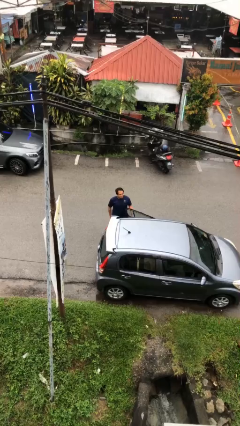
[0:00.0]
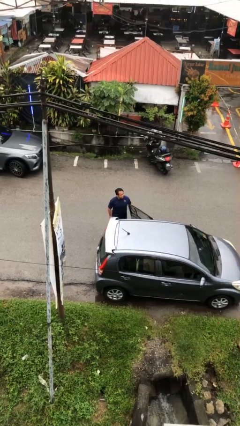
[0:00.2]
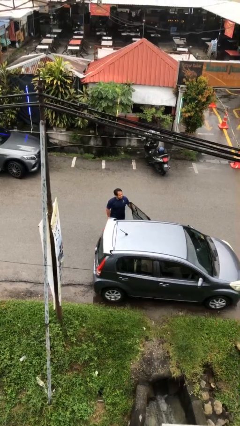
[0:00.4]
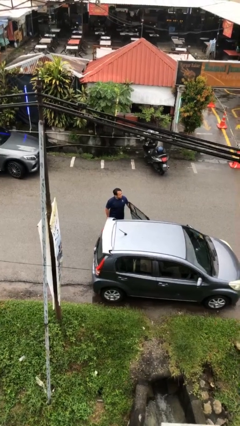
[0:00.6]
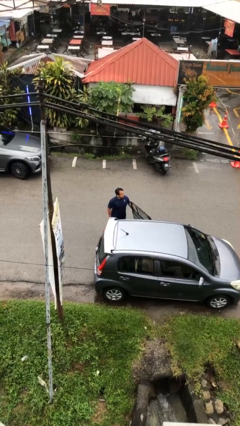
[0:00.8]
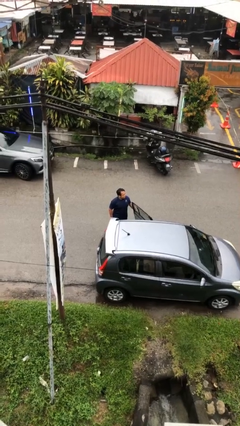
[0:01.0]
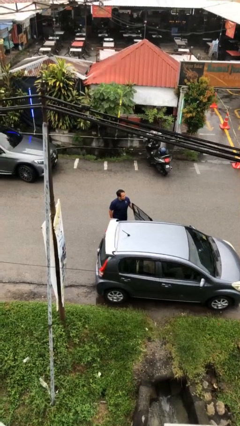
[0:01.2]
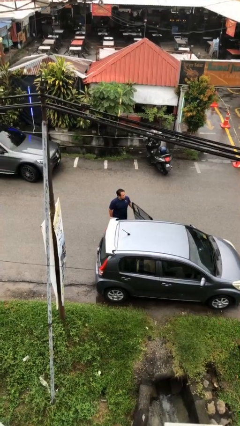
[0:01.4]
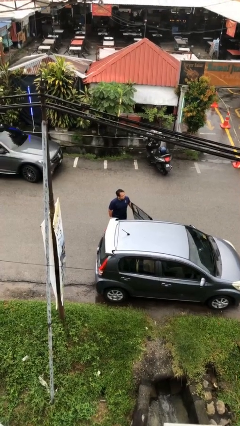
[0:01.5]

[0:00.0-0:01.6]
person opens car door

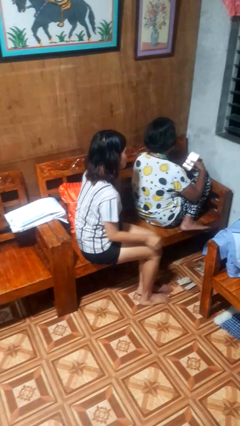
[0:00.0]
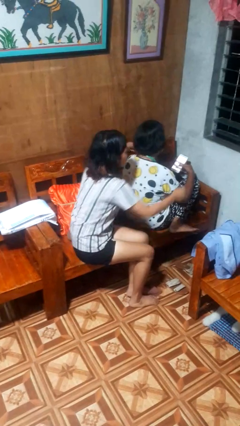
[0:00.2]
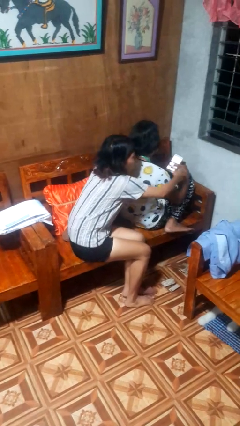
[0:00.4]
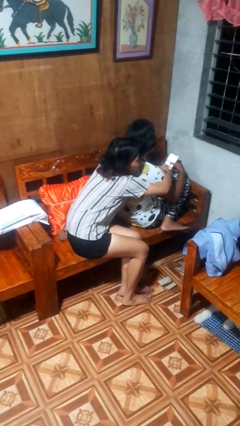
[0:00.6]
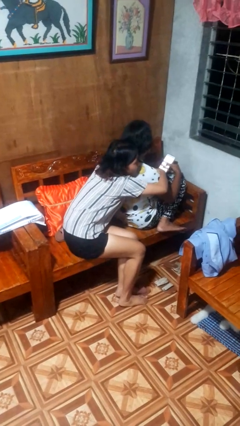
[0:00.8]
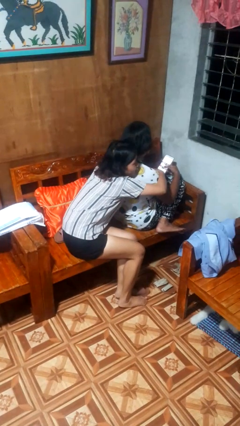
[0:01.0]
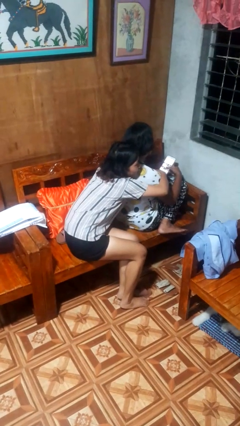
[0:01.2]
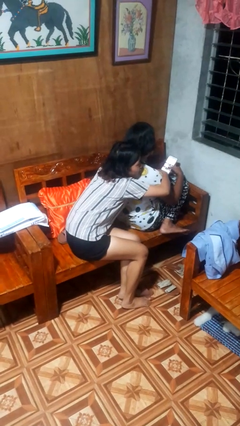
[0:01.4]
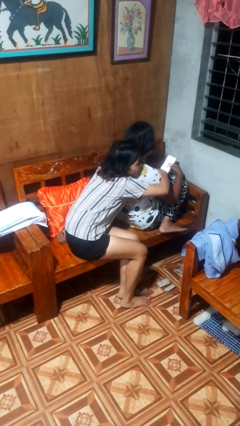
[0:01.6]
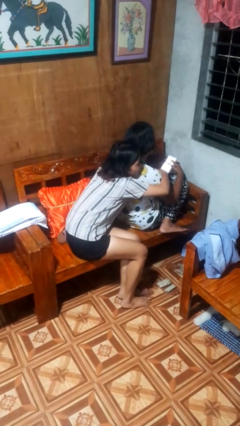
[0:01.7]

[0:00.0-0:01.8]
person hugs person from behind

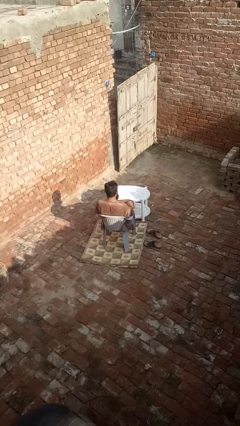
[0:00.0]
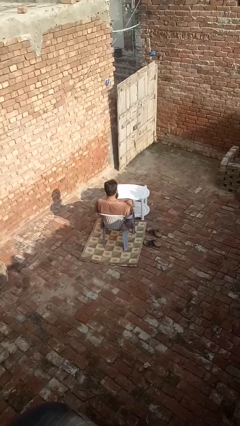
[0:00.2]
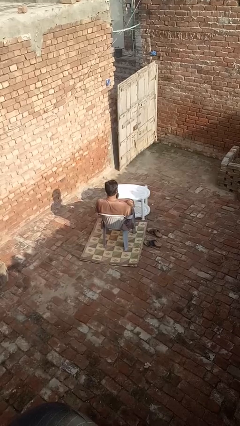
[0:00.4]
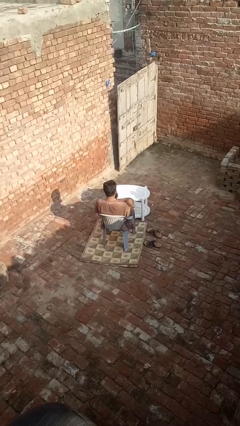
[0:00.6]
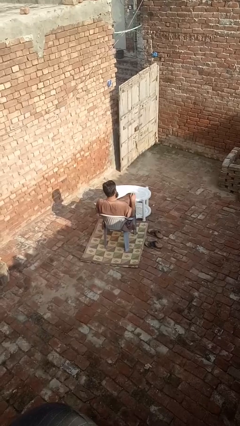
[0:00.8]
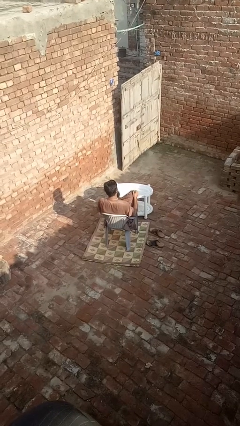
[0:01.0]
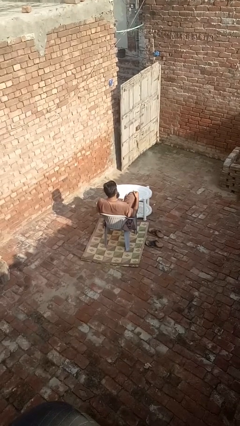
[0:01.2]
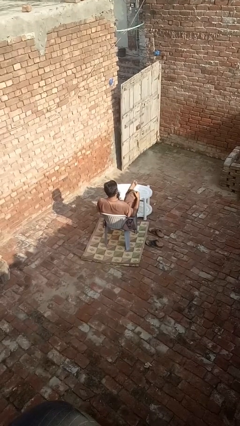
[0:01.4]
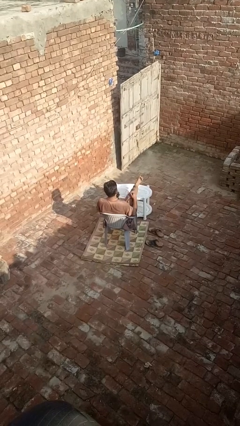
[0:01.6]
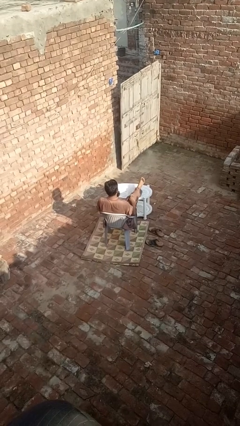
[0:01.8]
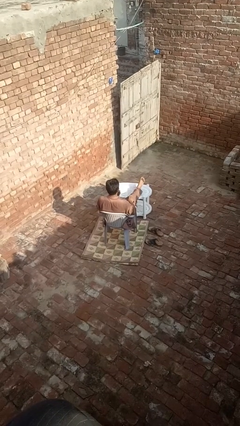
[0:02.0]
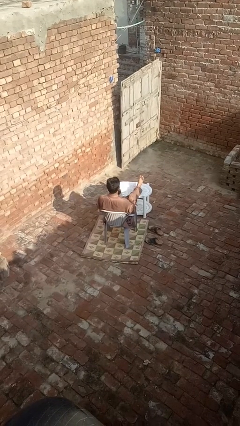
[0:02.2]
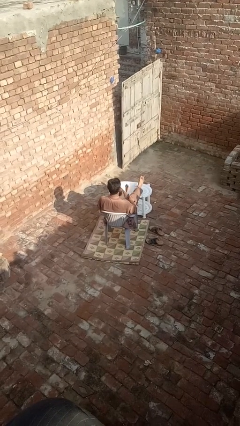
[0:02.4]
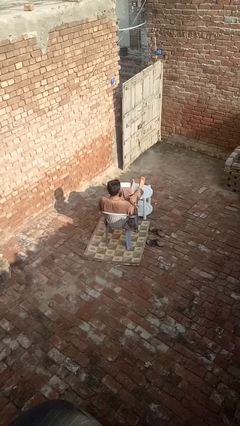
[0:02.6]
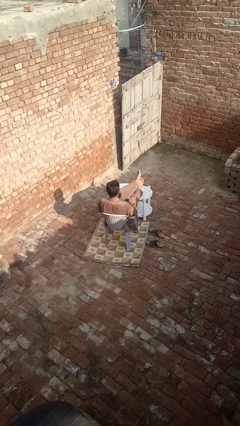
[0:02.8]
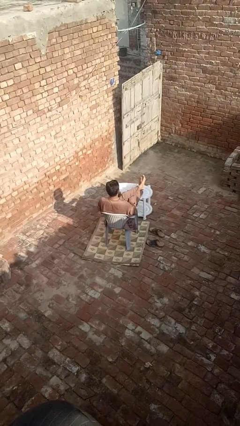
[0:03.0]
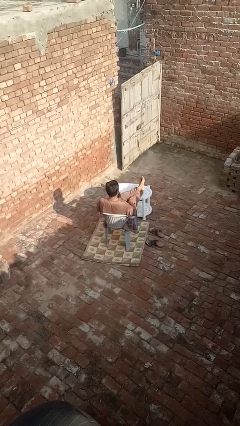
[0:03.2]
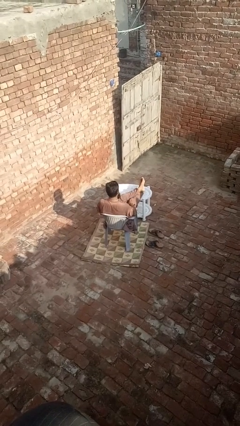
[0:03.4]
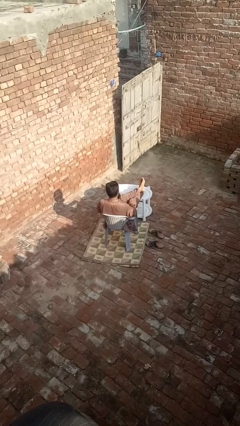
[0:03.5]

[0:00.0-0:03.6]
person puts feet up

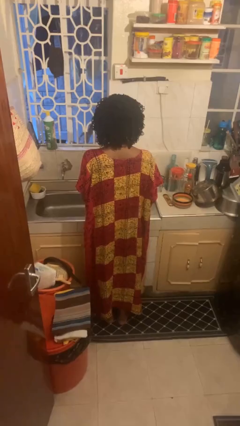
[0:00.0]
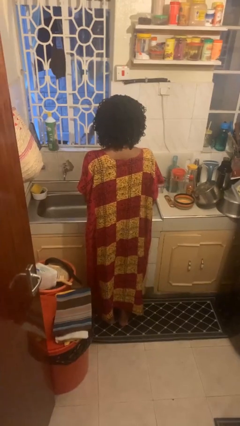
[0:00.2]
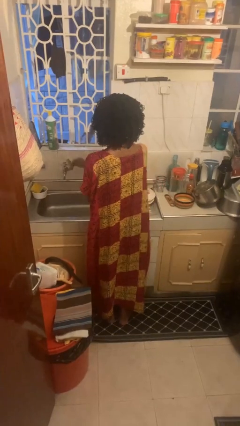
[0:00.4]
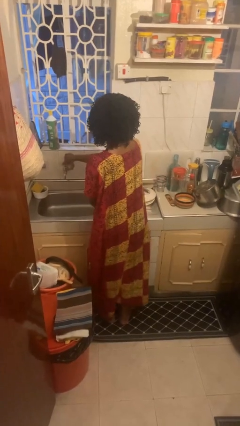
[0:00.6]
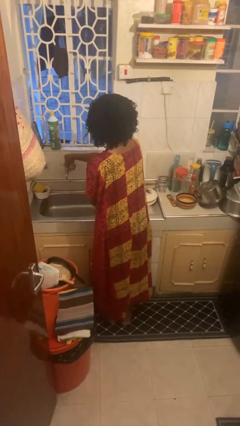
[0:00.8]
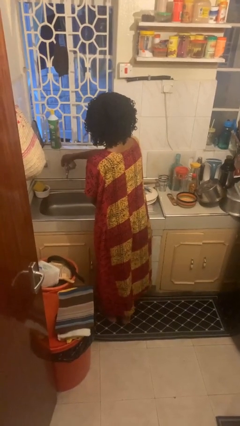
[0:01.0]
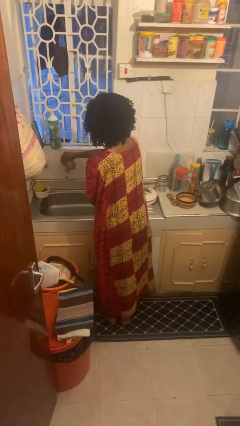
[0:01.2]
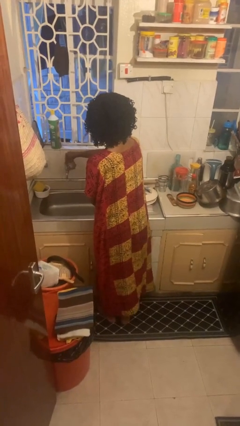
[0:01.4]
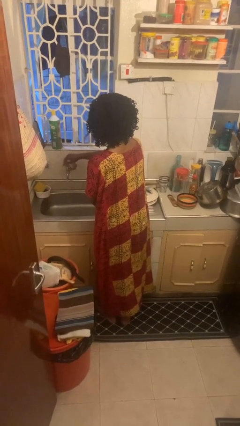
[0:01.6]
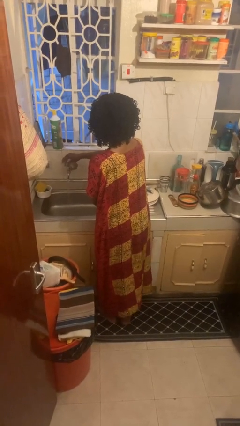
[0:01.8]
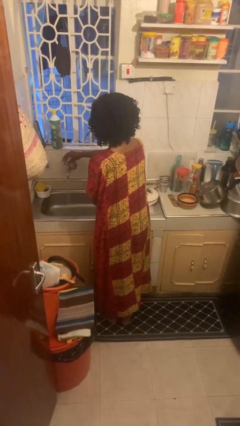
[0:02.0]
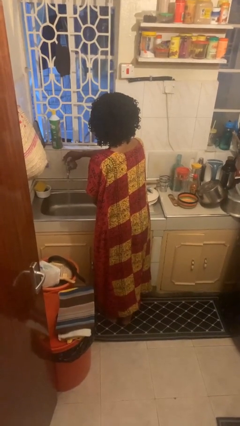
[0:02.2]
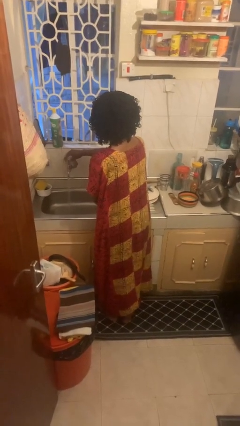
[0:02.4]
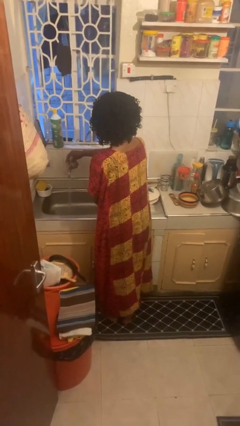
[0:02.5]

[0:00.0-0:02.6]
person turns on faucet

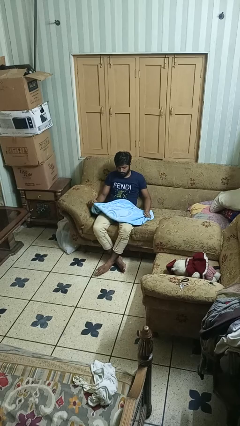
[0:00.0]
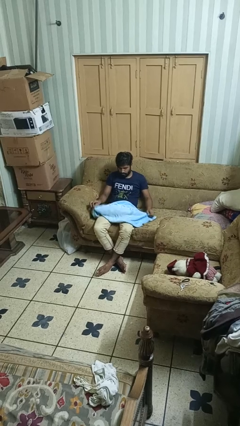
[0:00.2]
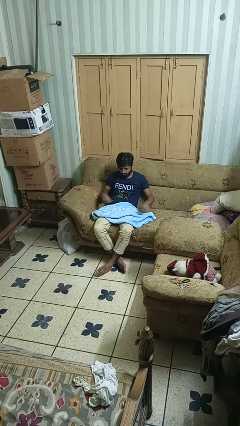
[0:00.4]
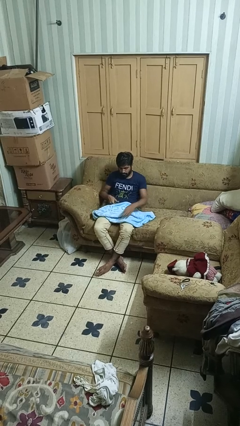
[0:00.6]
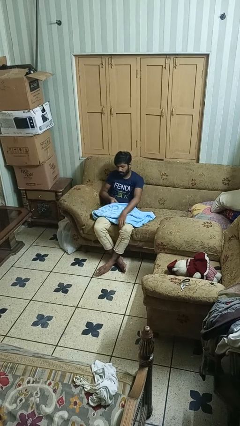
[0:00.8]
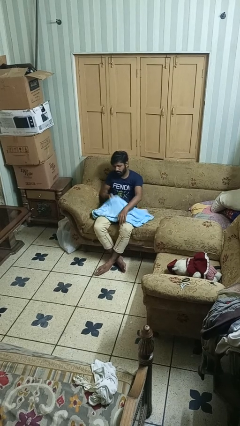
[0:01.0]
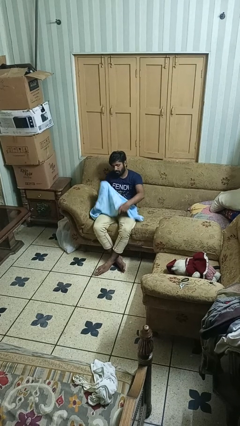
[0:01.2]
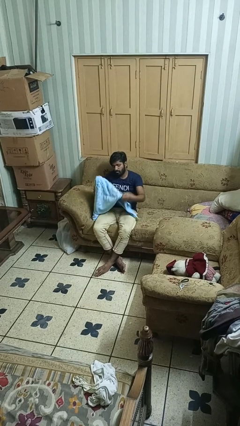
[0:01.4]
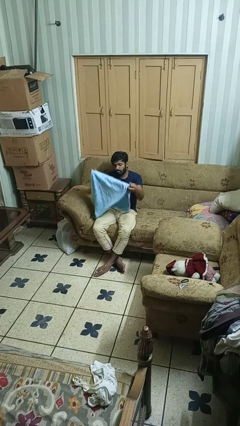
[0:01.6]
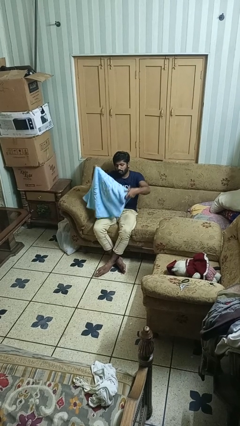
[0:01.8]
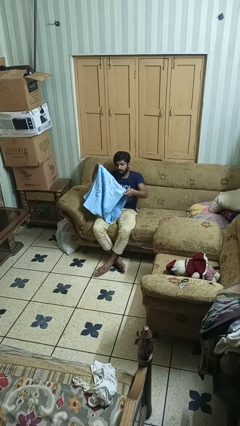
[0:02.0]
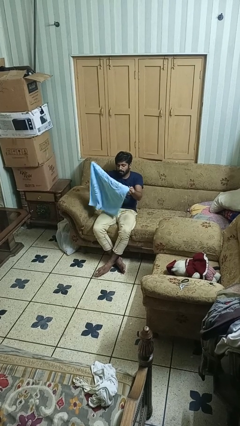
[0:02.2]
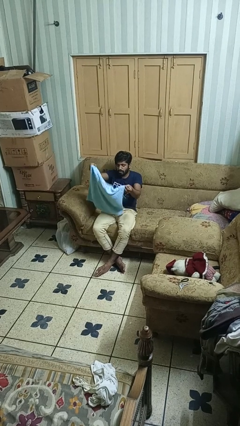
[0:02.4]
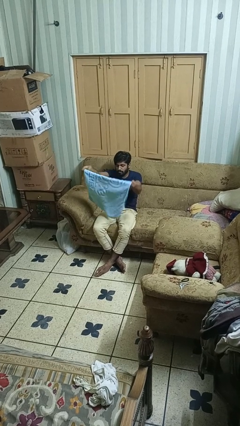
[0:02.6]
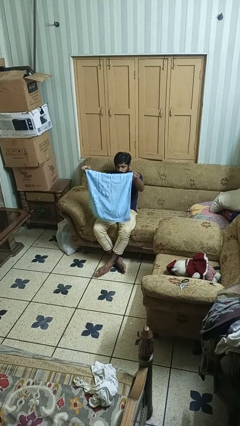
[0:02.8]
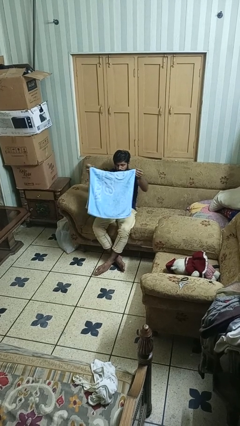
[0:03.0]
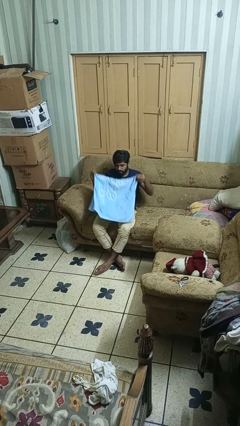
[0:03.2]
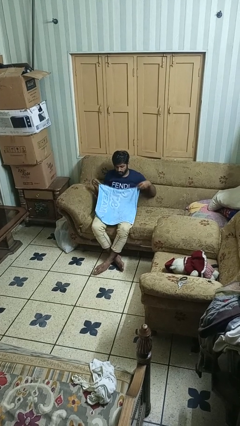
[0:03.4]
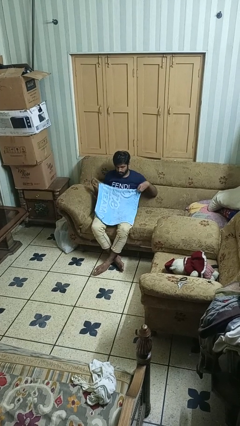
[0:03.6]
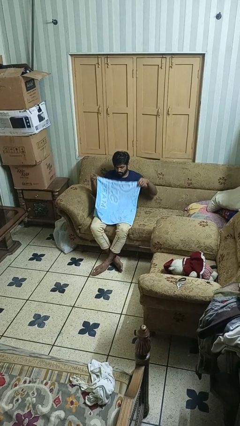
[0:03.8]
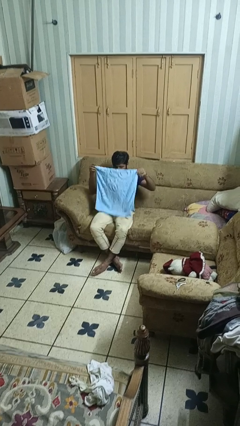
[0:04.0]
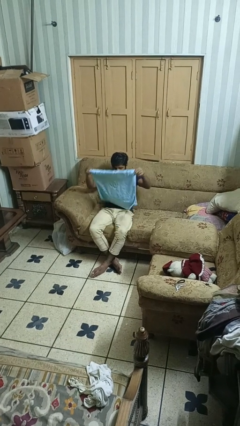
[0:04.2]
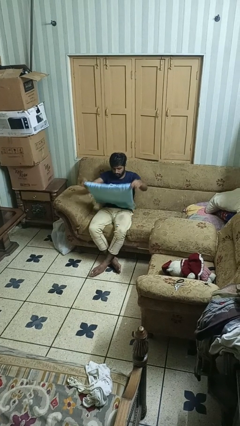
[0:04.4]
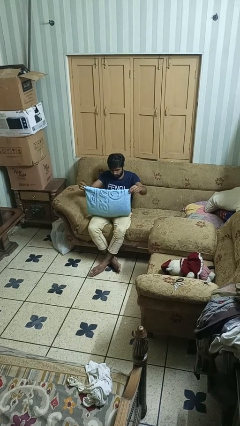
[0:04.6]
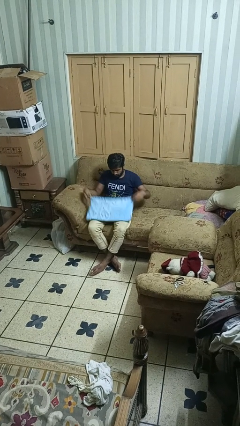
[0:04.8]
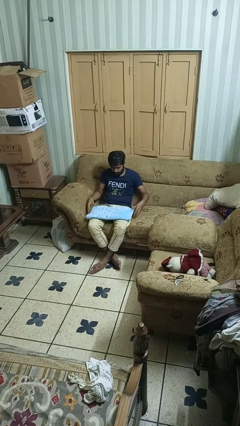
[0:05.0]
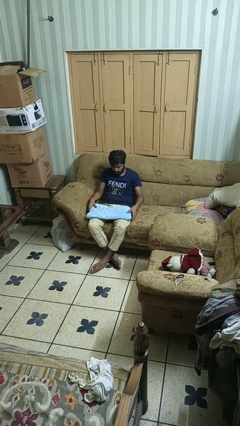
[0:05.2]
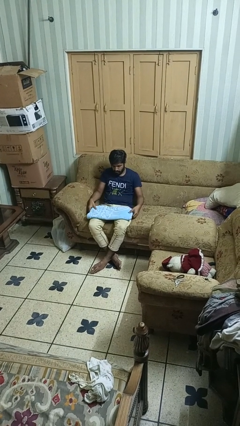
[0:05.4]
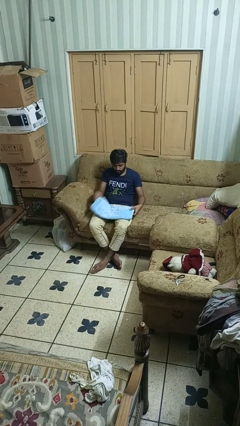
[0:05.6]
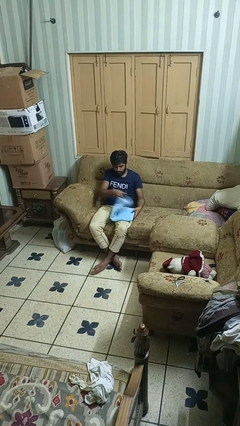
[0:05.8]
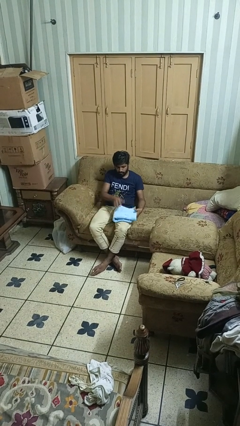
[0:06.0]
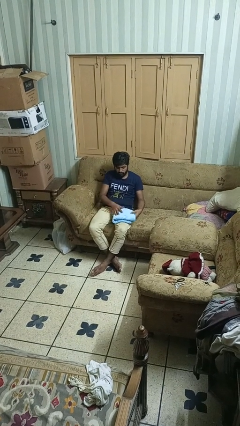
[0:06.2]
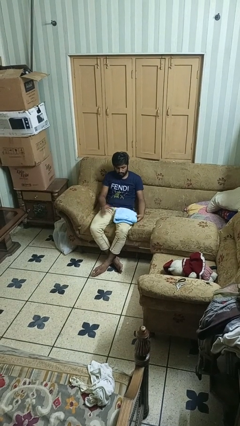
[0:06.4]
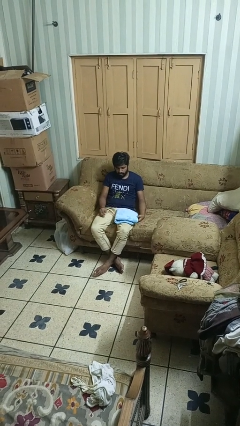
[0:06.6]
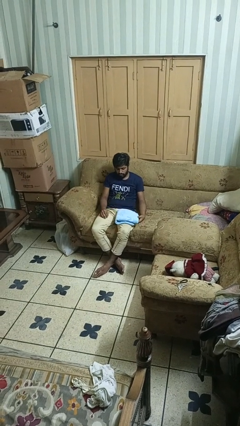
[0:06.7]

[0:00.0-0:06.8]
person folds towel

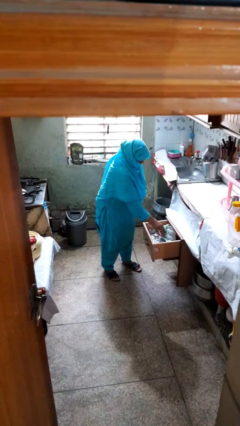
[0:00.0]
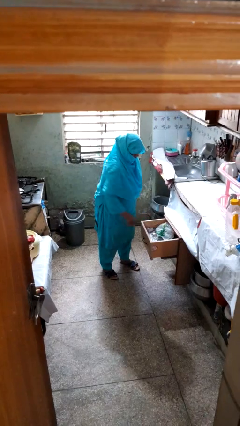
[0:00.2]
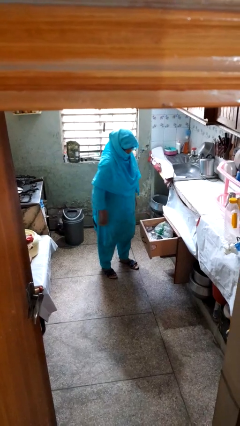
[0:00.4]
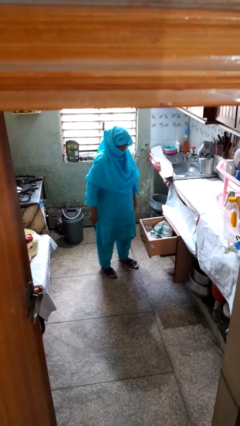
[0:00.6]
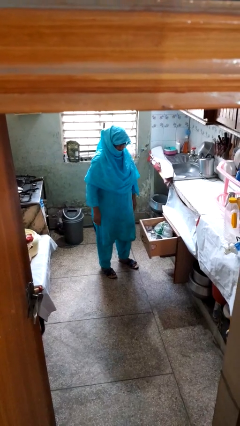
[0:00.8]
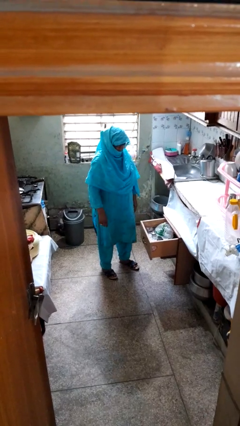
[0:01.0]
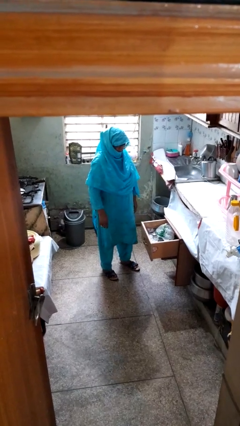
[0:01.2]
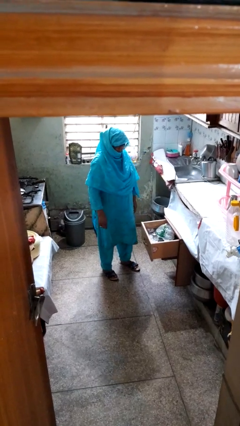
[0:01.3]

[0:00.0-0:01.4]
person puts object into kitchen drawer
